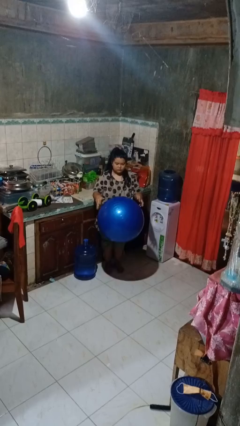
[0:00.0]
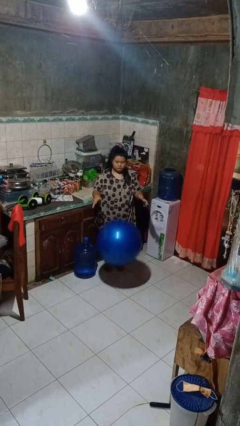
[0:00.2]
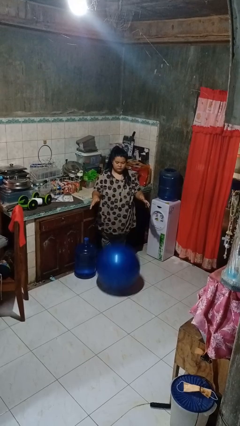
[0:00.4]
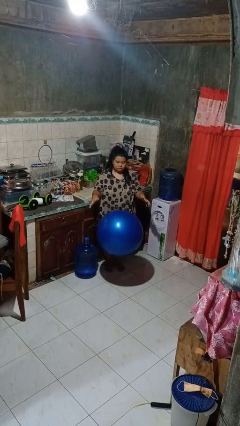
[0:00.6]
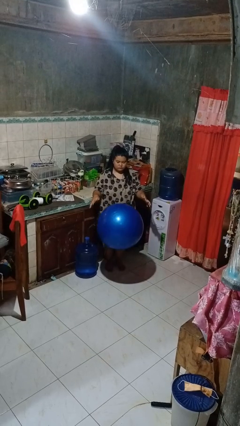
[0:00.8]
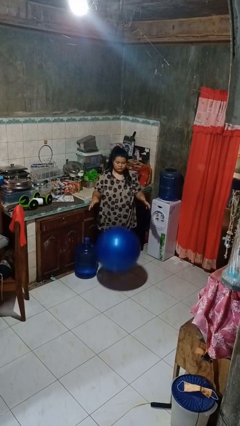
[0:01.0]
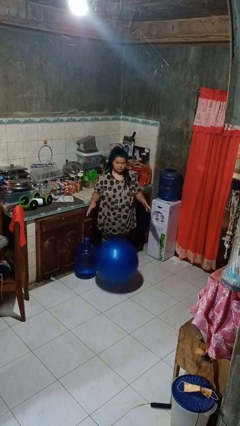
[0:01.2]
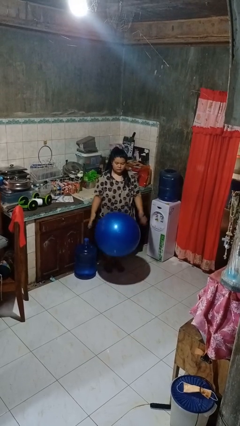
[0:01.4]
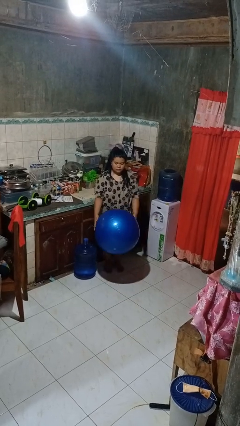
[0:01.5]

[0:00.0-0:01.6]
person bounces ball on floor

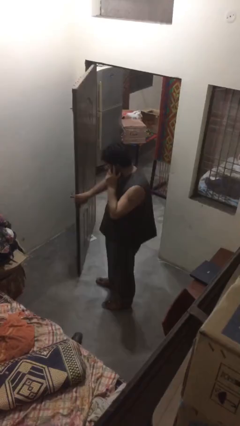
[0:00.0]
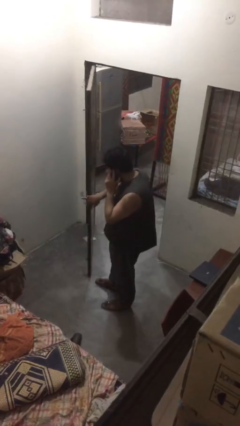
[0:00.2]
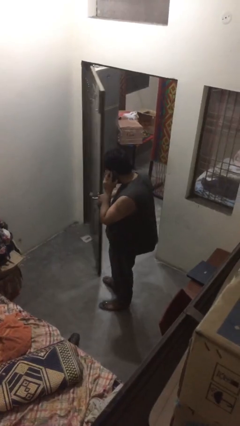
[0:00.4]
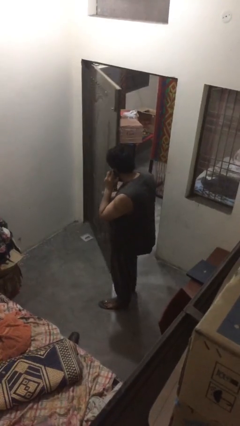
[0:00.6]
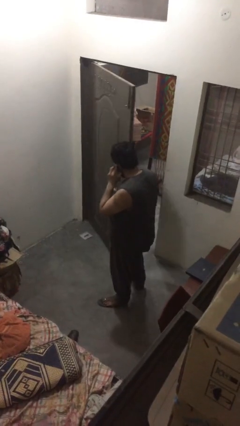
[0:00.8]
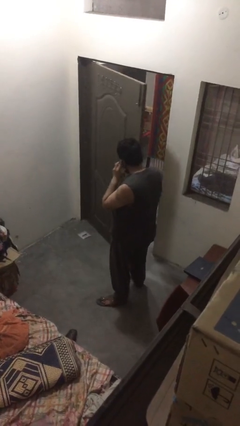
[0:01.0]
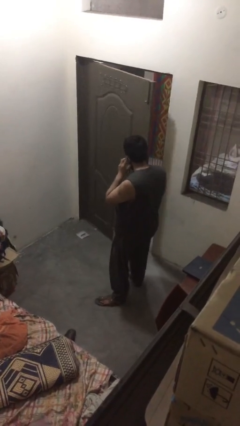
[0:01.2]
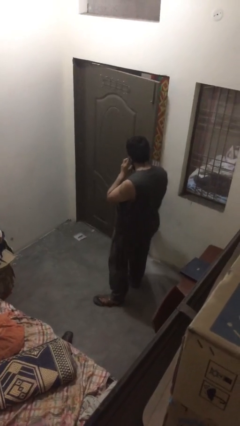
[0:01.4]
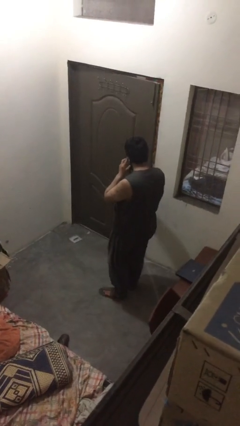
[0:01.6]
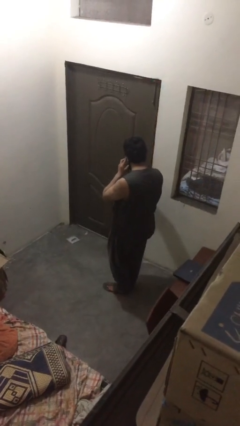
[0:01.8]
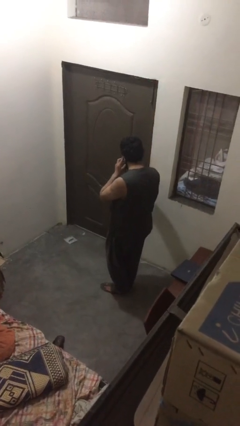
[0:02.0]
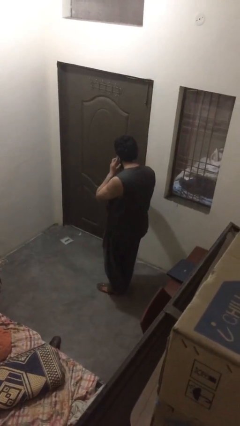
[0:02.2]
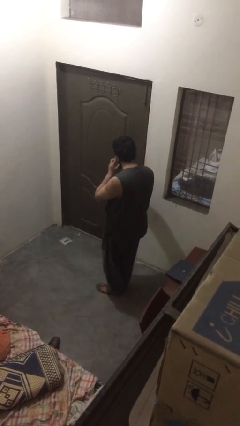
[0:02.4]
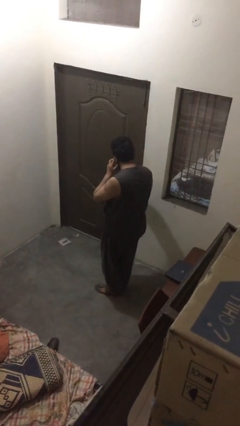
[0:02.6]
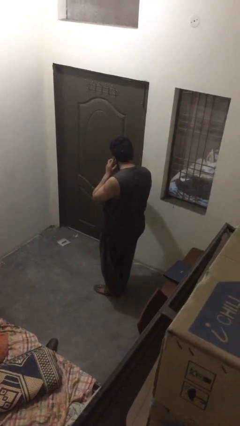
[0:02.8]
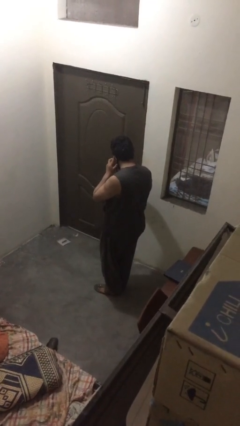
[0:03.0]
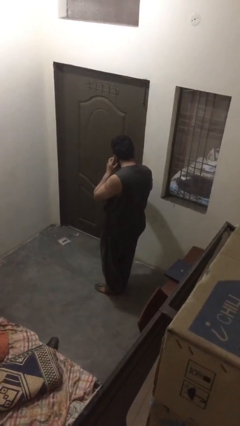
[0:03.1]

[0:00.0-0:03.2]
person closes facility door

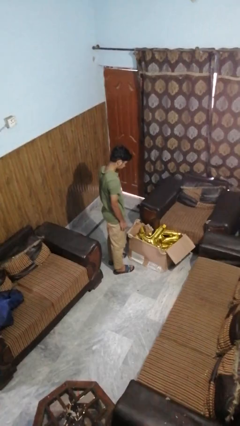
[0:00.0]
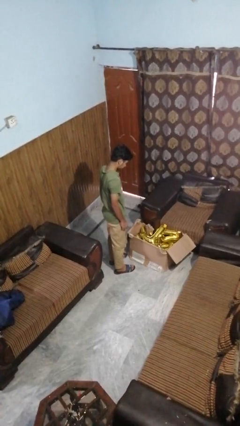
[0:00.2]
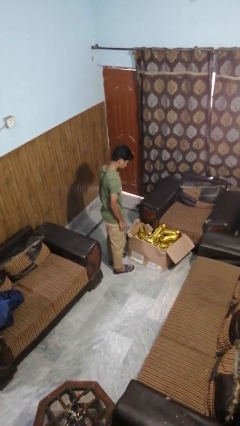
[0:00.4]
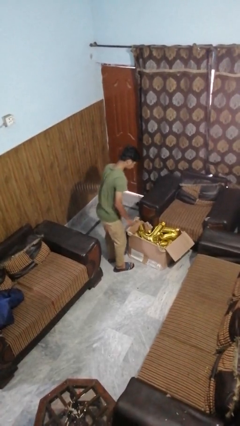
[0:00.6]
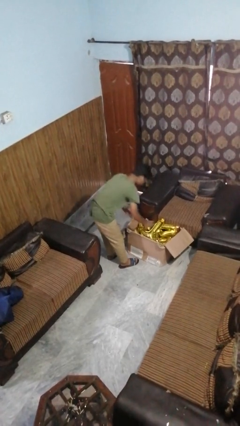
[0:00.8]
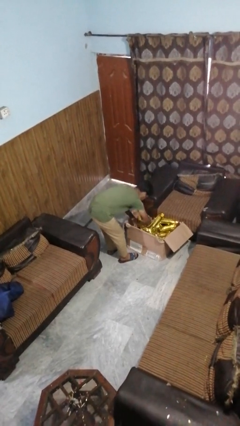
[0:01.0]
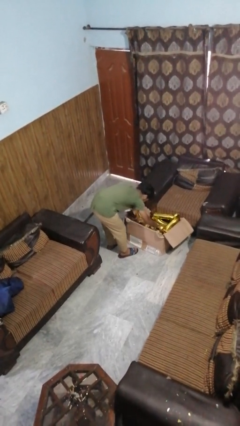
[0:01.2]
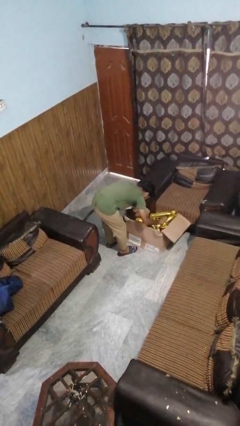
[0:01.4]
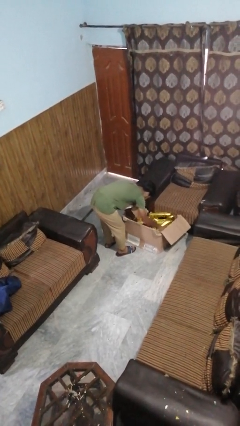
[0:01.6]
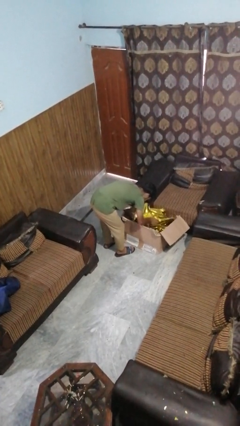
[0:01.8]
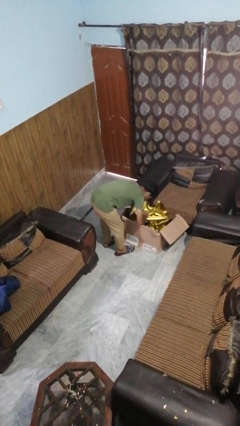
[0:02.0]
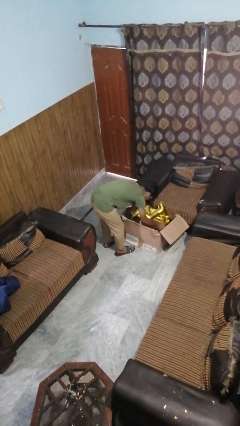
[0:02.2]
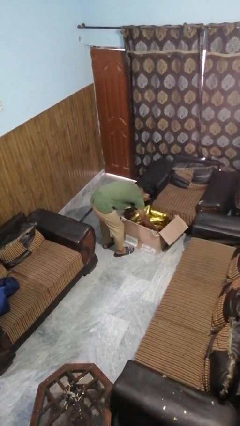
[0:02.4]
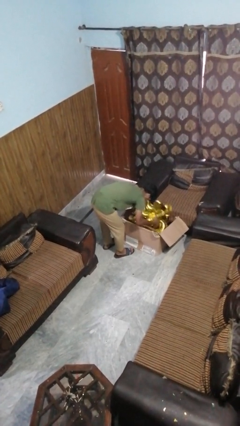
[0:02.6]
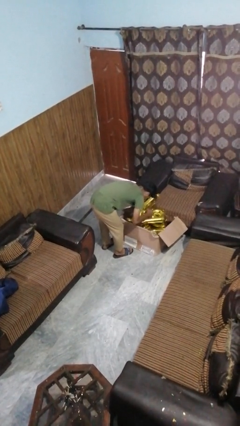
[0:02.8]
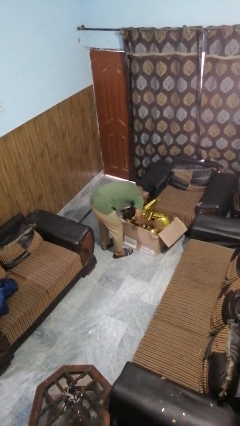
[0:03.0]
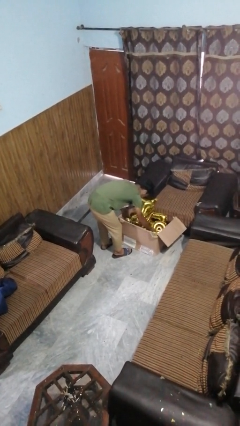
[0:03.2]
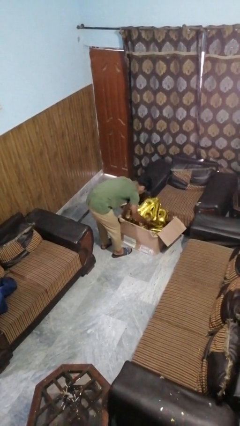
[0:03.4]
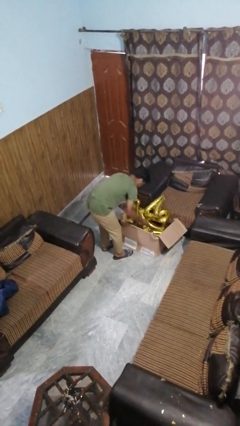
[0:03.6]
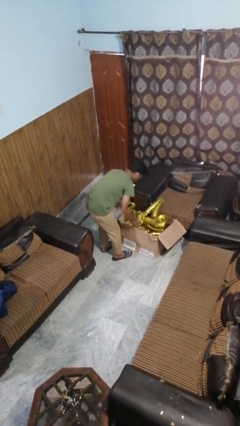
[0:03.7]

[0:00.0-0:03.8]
person searches in box

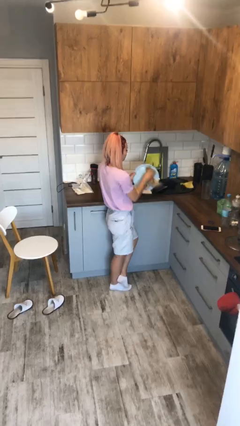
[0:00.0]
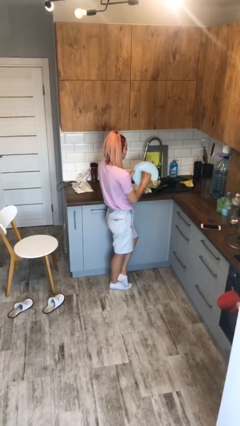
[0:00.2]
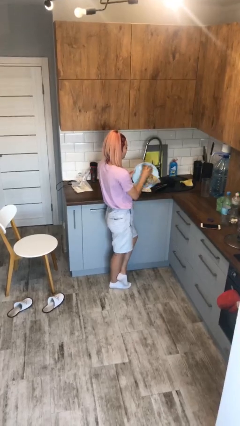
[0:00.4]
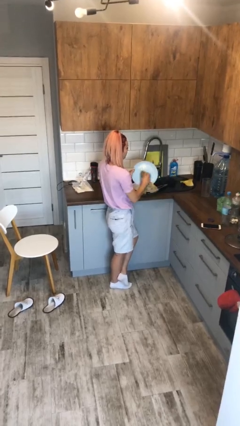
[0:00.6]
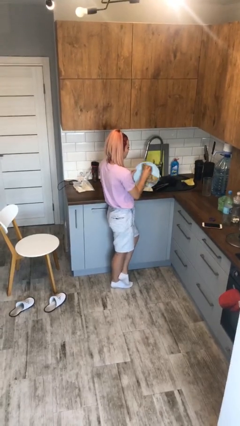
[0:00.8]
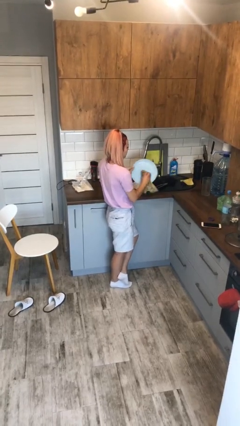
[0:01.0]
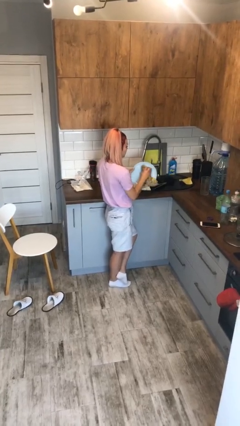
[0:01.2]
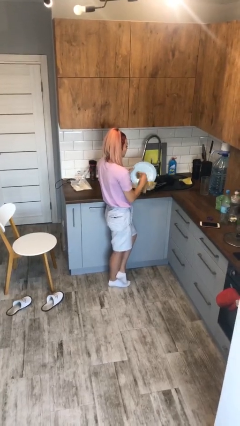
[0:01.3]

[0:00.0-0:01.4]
person dries dish

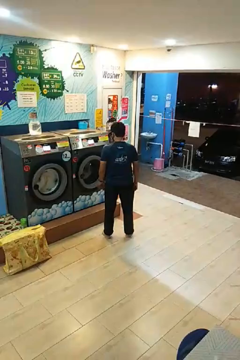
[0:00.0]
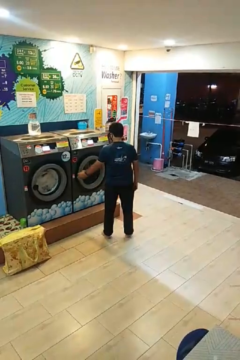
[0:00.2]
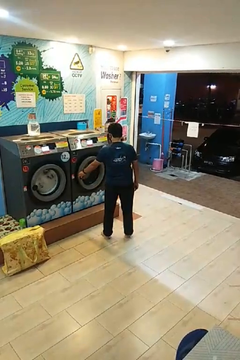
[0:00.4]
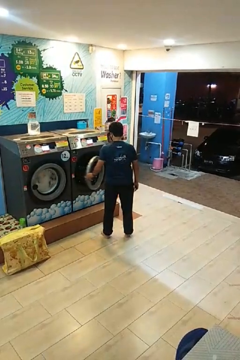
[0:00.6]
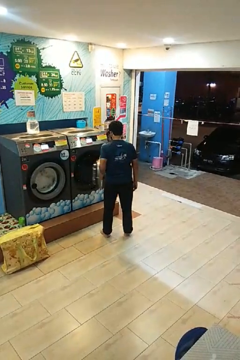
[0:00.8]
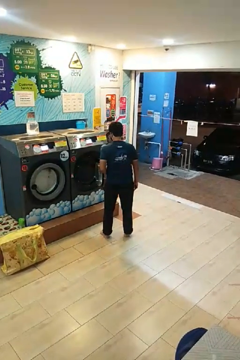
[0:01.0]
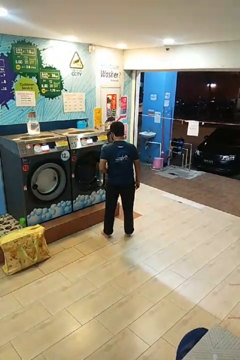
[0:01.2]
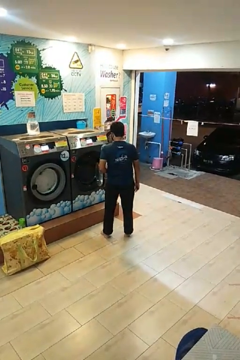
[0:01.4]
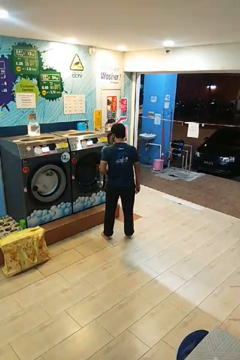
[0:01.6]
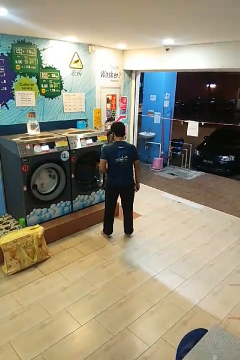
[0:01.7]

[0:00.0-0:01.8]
person opens clothes washer

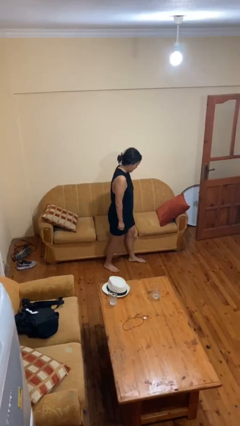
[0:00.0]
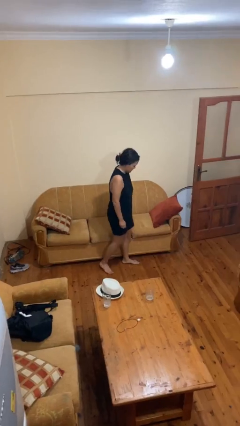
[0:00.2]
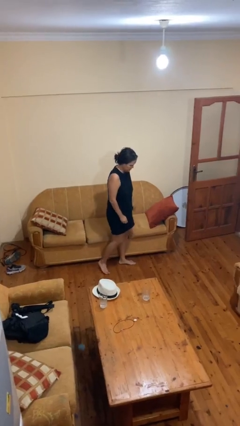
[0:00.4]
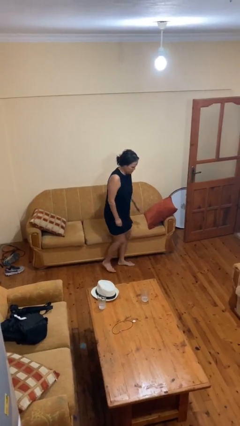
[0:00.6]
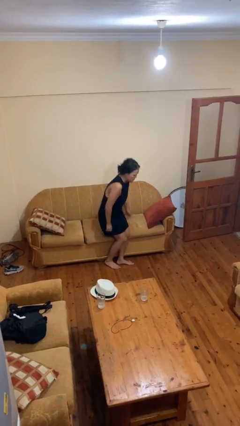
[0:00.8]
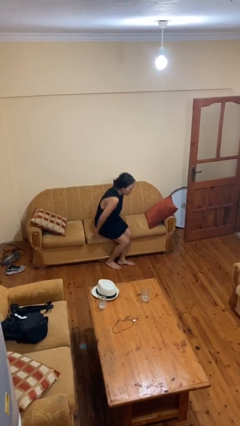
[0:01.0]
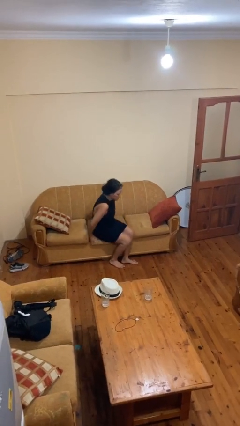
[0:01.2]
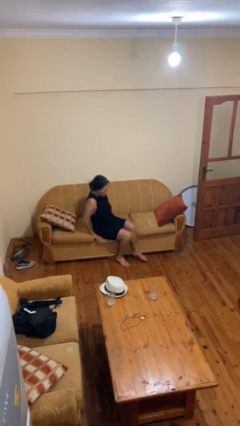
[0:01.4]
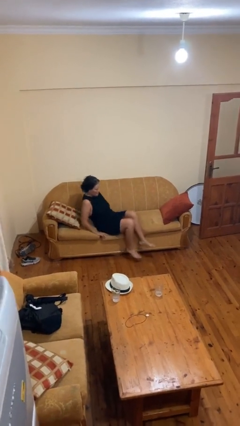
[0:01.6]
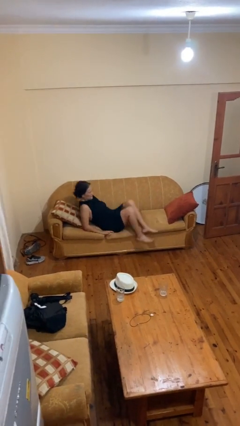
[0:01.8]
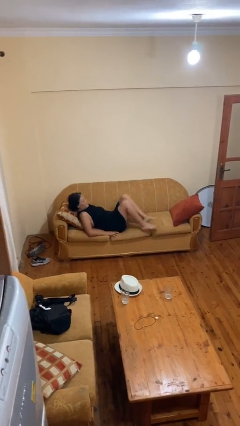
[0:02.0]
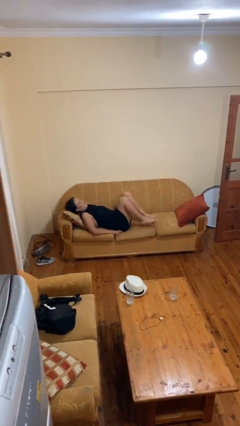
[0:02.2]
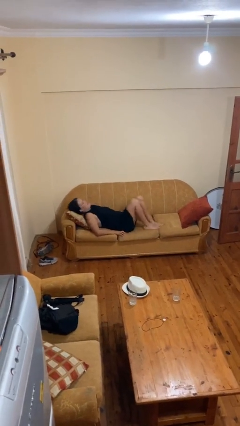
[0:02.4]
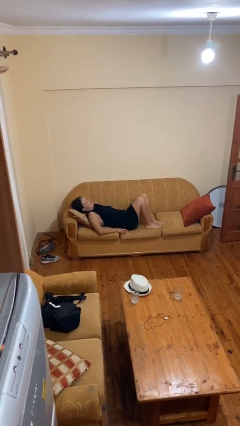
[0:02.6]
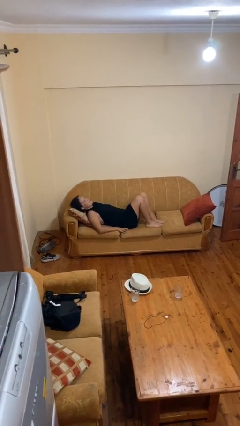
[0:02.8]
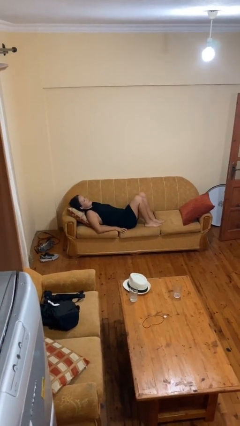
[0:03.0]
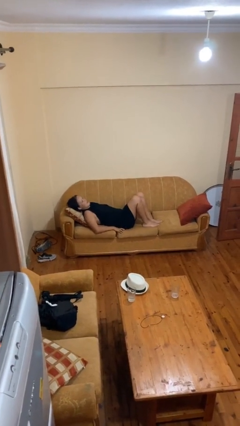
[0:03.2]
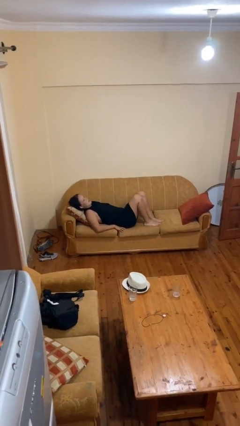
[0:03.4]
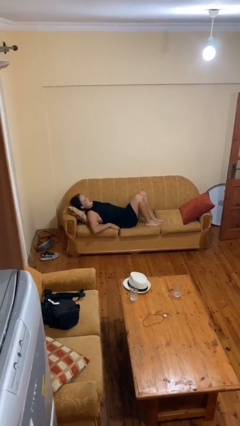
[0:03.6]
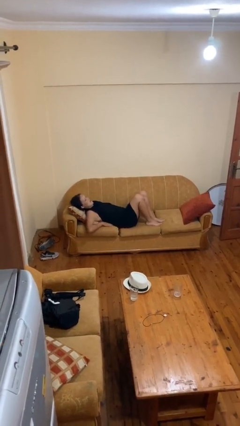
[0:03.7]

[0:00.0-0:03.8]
person lies down on couch

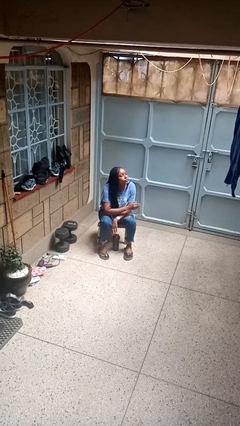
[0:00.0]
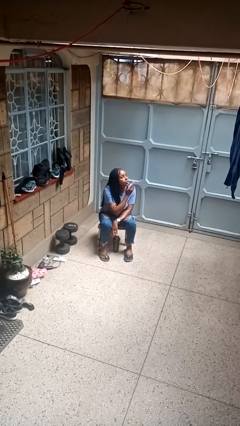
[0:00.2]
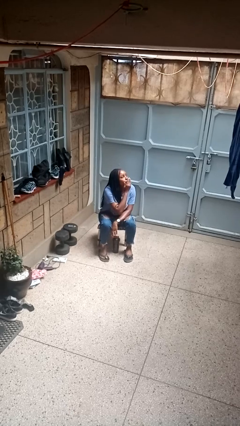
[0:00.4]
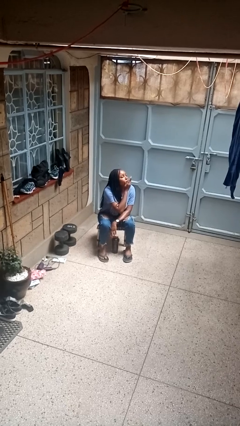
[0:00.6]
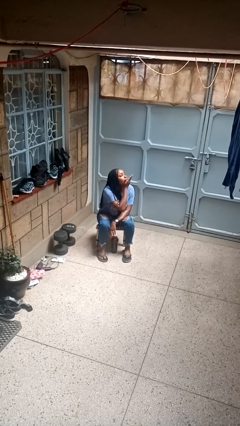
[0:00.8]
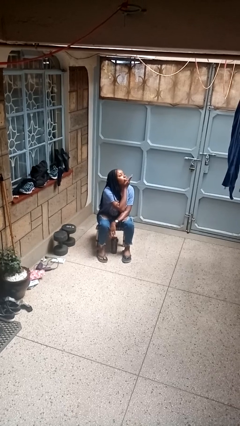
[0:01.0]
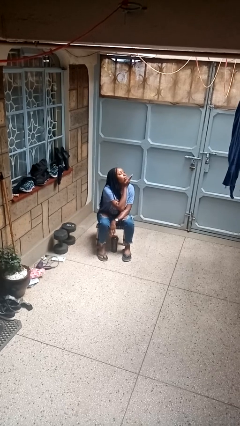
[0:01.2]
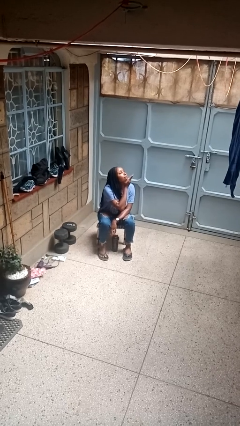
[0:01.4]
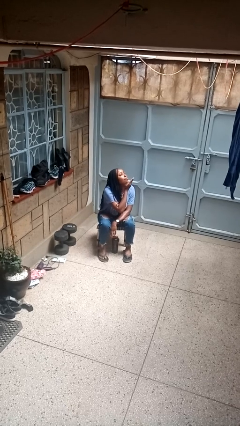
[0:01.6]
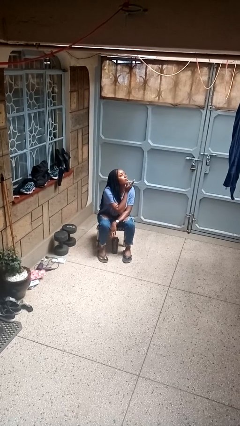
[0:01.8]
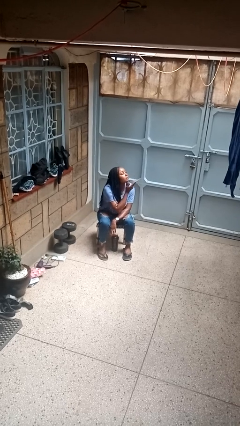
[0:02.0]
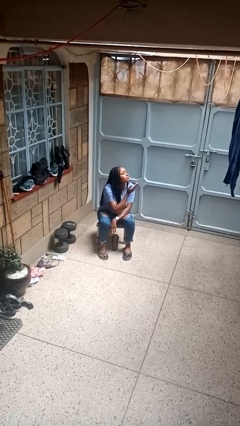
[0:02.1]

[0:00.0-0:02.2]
person gestures blow kiss
